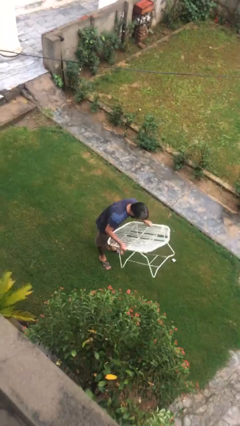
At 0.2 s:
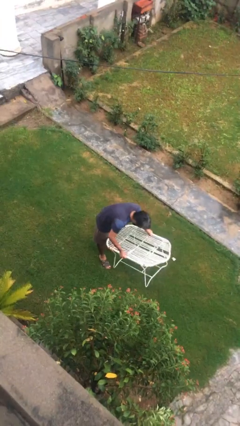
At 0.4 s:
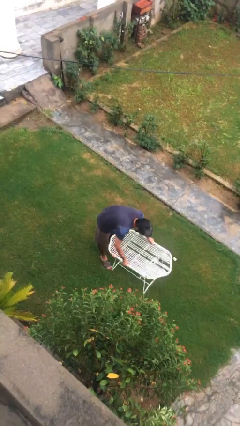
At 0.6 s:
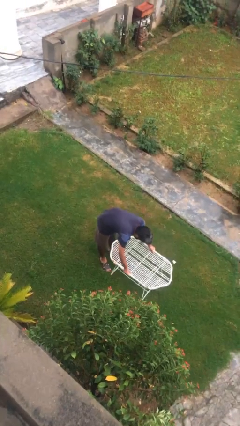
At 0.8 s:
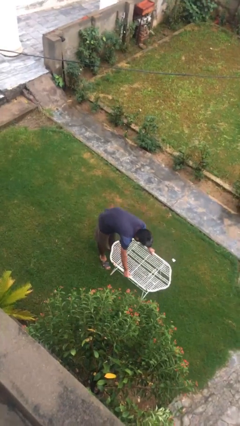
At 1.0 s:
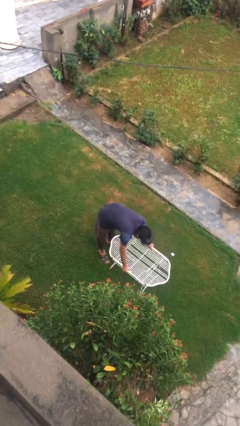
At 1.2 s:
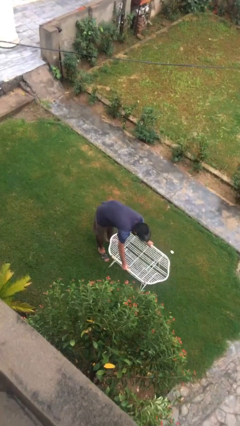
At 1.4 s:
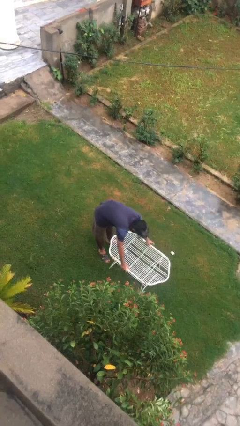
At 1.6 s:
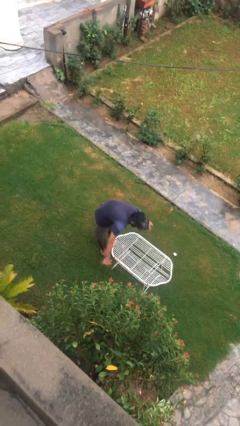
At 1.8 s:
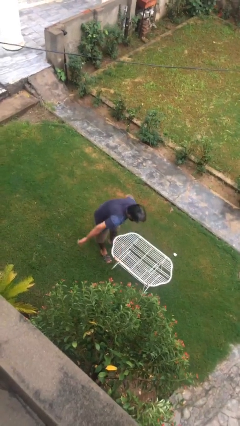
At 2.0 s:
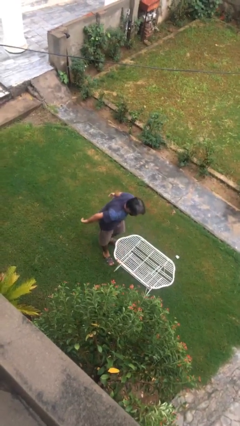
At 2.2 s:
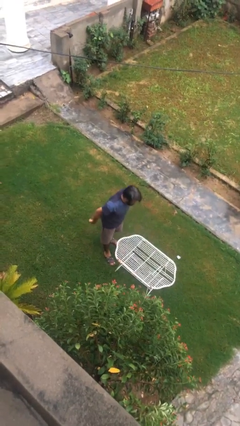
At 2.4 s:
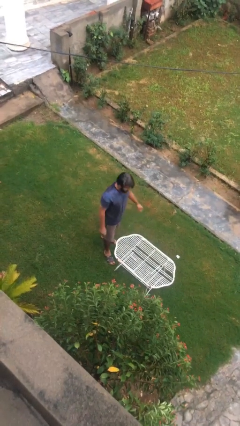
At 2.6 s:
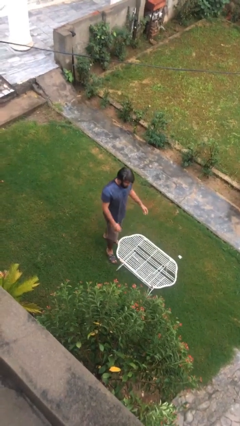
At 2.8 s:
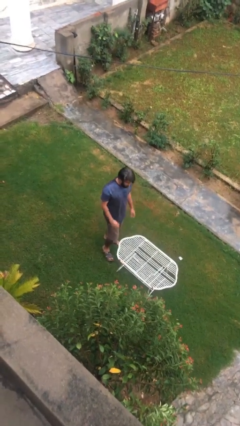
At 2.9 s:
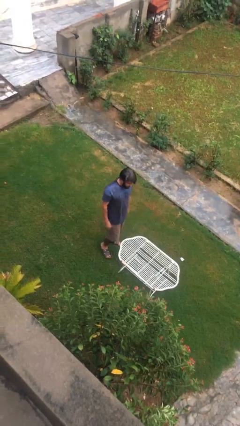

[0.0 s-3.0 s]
person puts down object on floor

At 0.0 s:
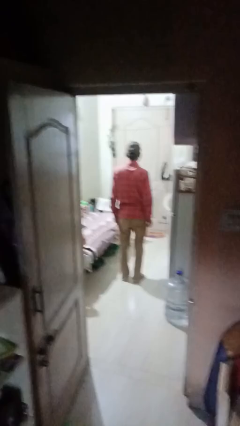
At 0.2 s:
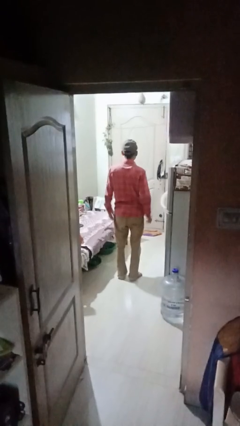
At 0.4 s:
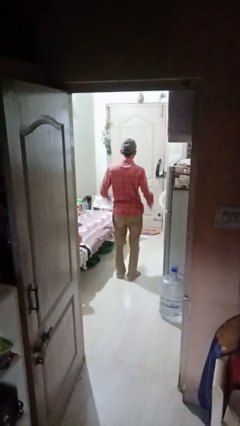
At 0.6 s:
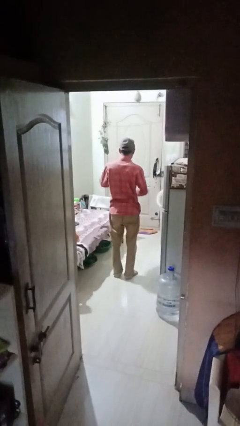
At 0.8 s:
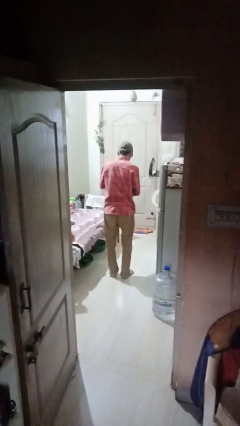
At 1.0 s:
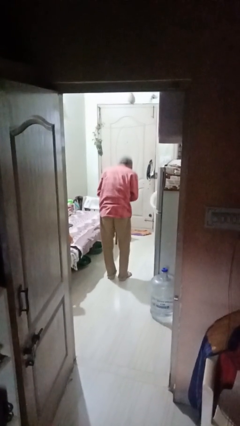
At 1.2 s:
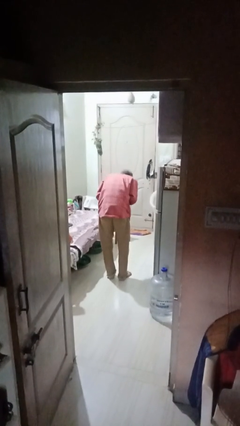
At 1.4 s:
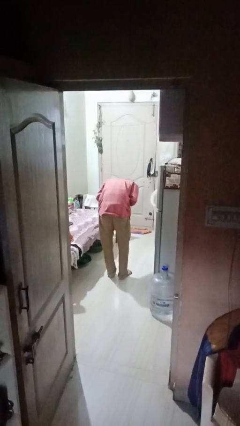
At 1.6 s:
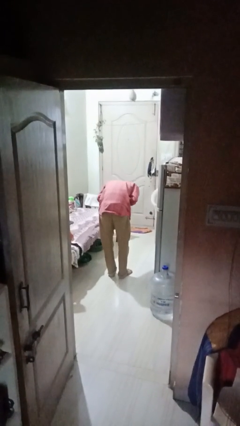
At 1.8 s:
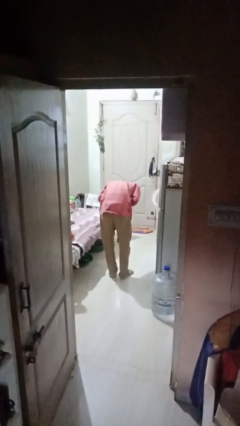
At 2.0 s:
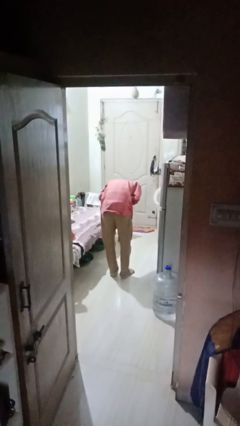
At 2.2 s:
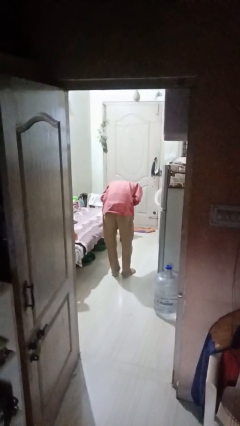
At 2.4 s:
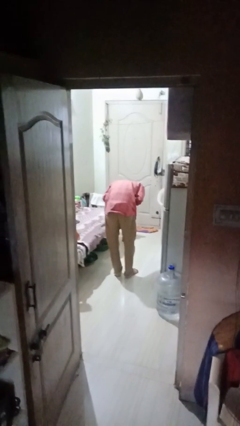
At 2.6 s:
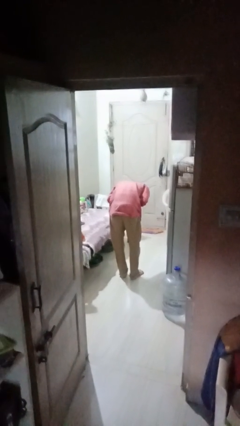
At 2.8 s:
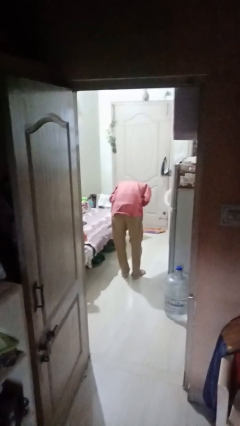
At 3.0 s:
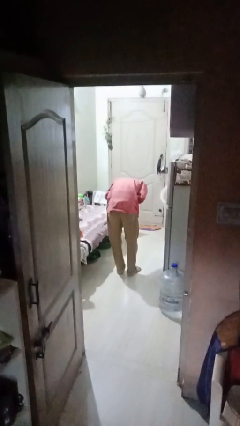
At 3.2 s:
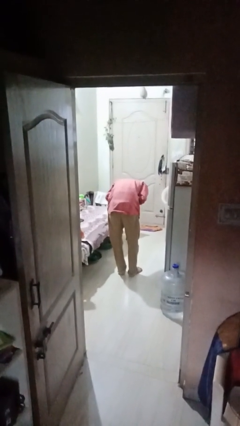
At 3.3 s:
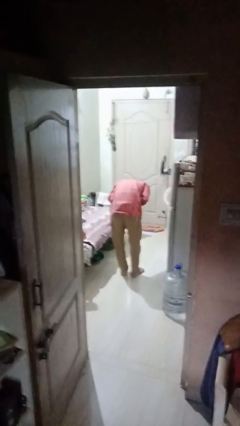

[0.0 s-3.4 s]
person bows

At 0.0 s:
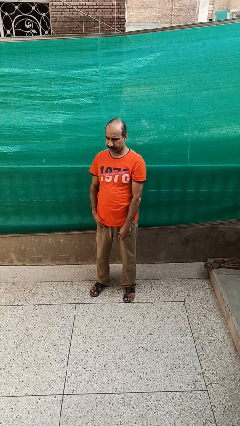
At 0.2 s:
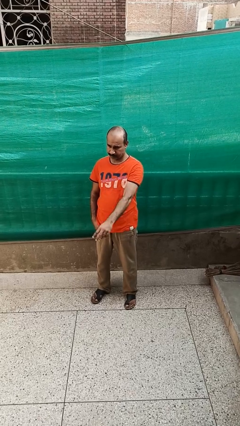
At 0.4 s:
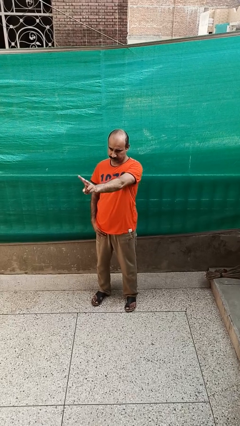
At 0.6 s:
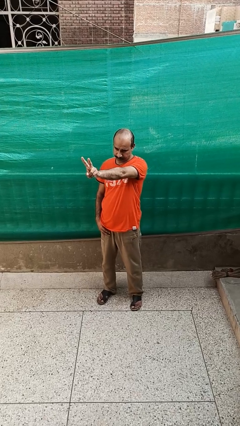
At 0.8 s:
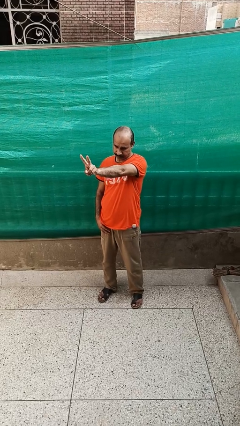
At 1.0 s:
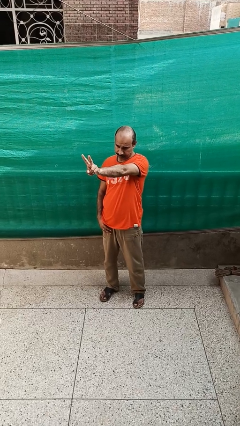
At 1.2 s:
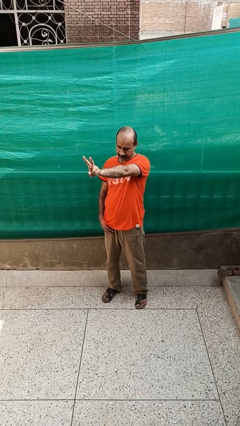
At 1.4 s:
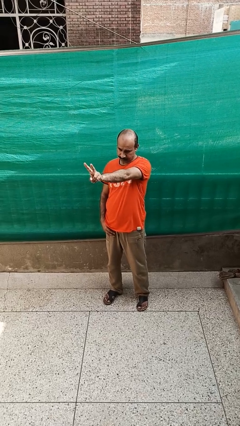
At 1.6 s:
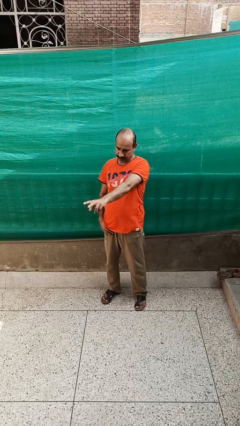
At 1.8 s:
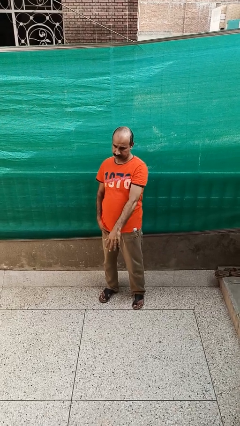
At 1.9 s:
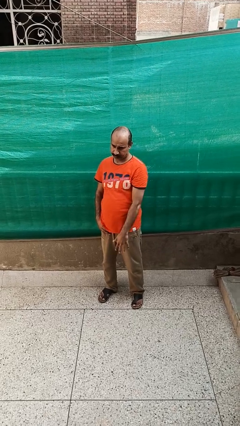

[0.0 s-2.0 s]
person gestures peace

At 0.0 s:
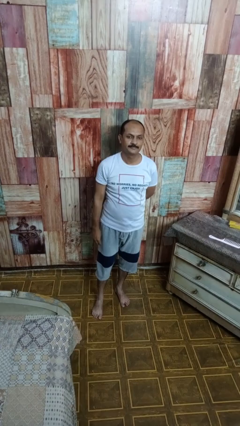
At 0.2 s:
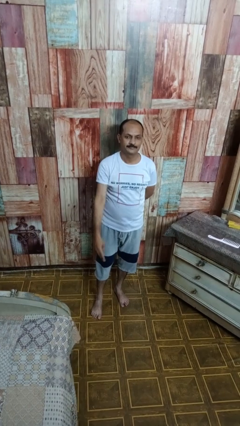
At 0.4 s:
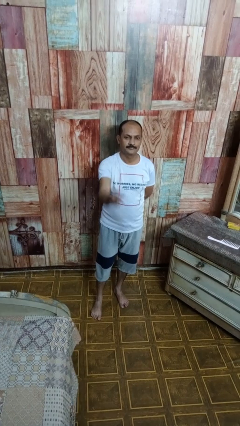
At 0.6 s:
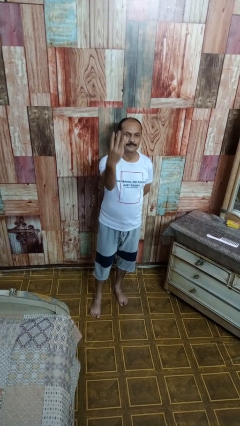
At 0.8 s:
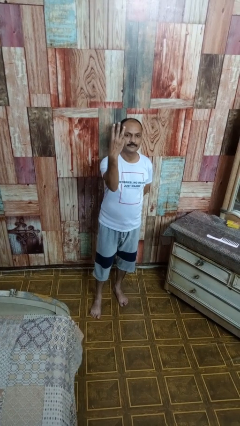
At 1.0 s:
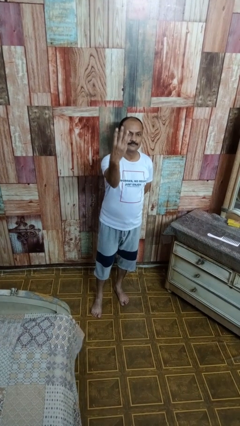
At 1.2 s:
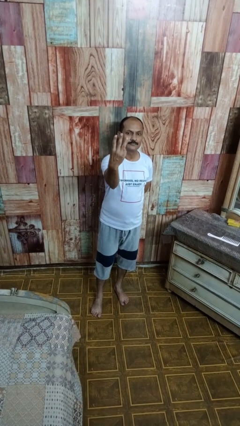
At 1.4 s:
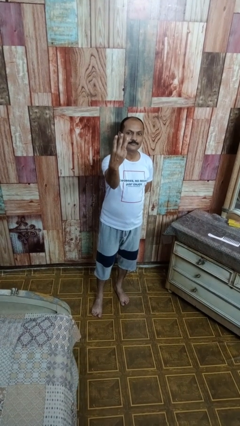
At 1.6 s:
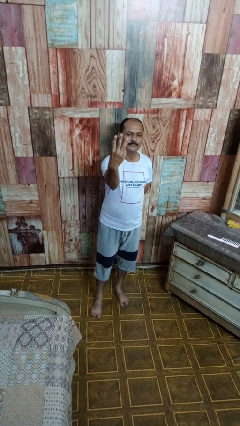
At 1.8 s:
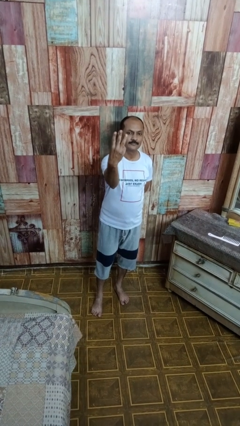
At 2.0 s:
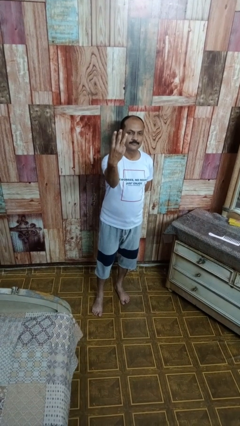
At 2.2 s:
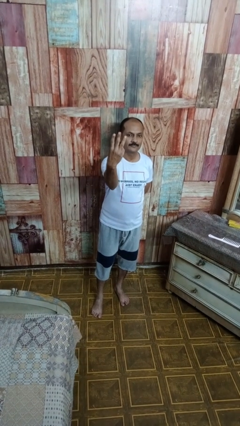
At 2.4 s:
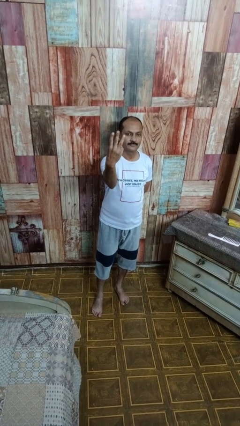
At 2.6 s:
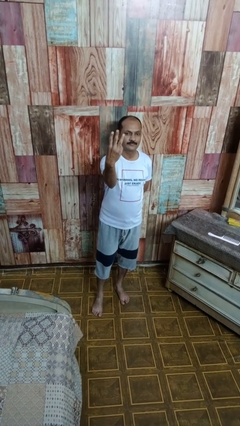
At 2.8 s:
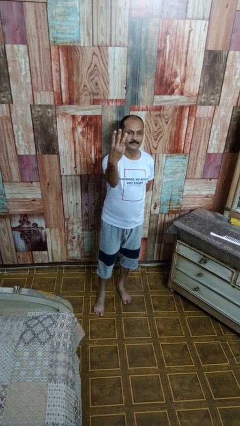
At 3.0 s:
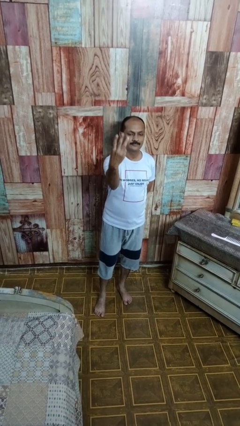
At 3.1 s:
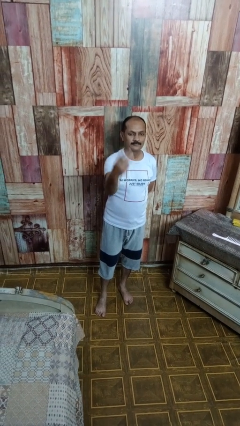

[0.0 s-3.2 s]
person gestures number three

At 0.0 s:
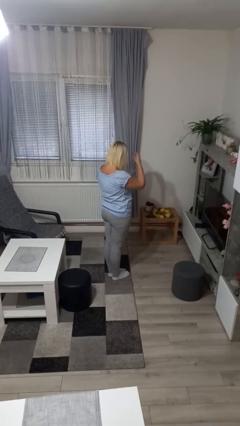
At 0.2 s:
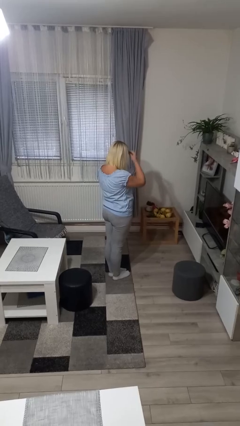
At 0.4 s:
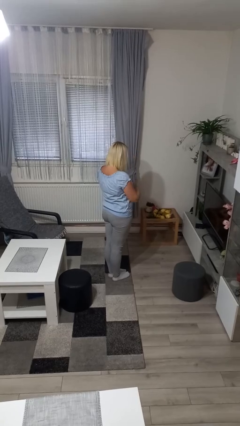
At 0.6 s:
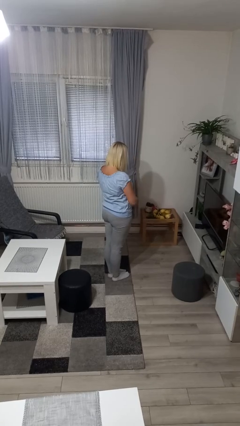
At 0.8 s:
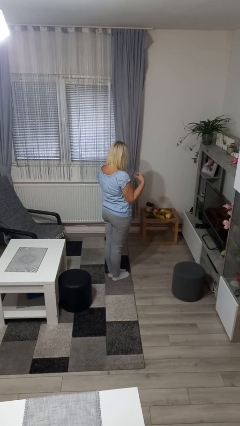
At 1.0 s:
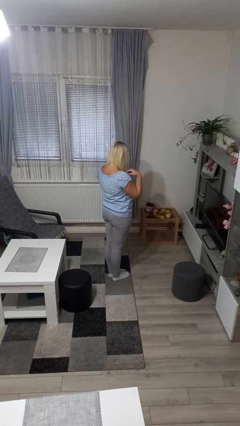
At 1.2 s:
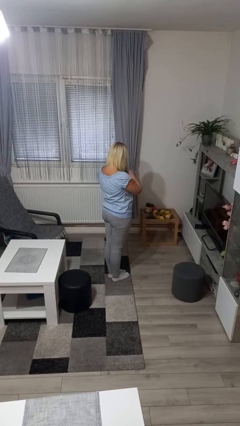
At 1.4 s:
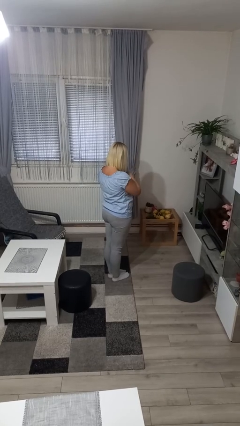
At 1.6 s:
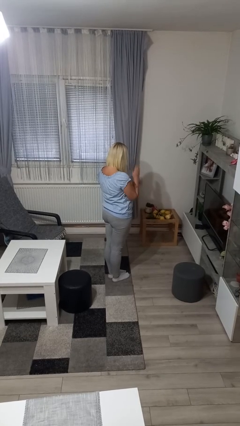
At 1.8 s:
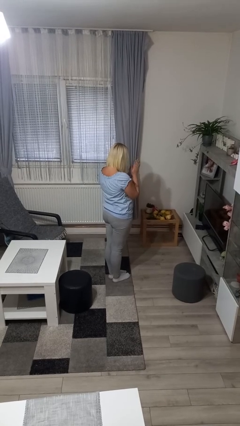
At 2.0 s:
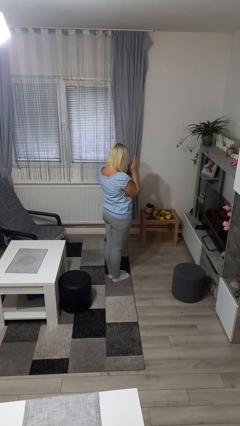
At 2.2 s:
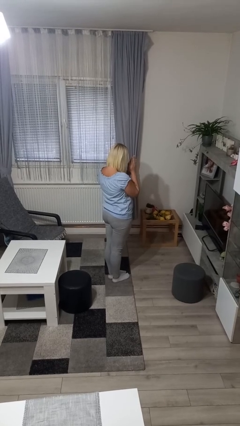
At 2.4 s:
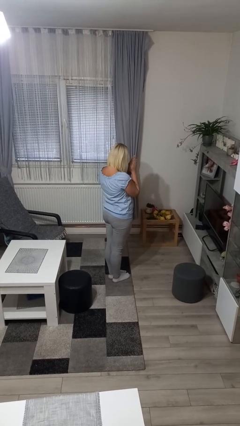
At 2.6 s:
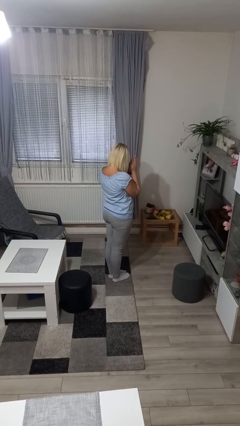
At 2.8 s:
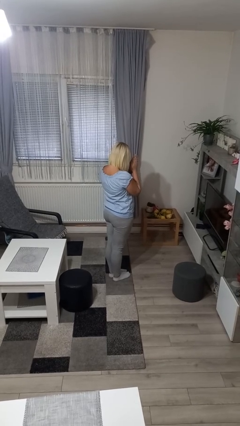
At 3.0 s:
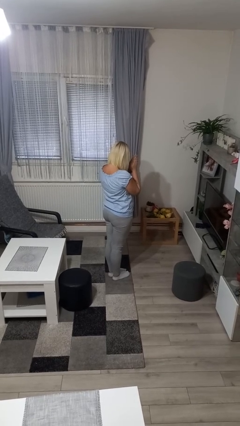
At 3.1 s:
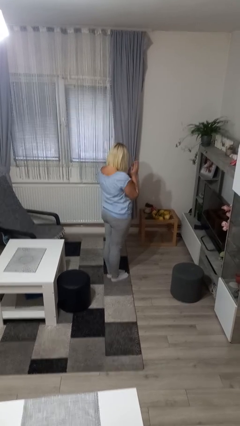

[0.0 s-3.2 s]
person prays

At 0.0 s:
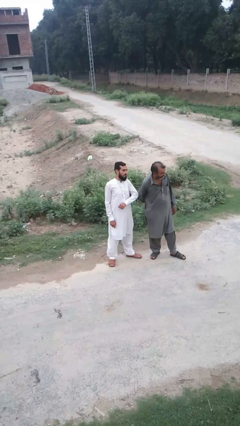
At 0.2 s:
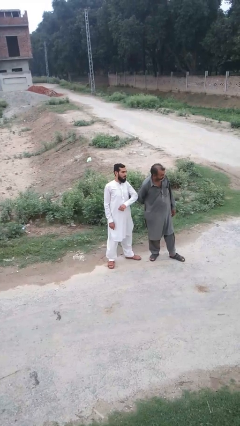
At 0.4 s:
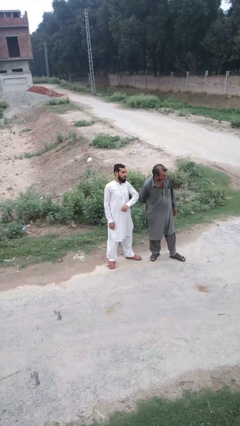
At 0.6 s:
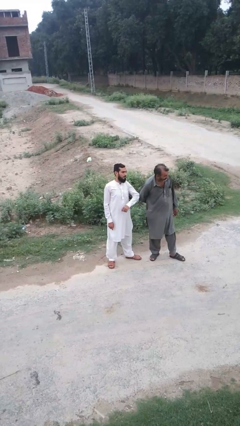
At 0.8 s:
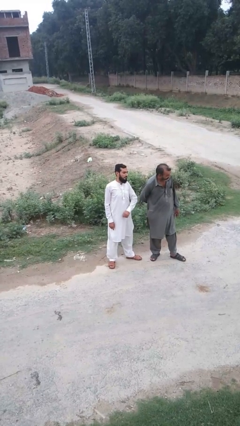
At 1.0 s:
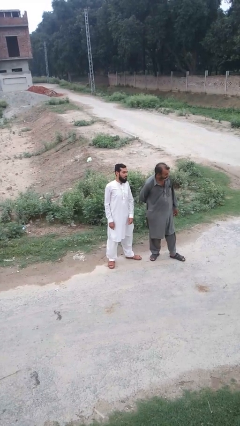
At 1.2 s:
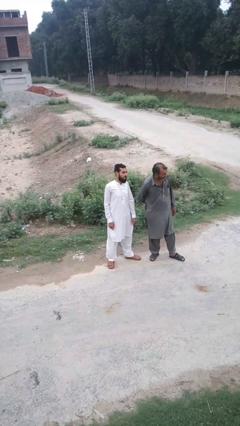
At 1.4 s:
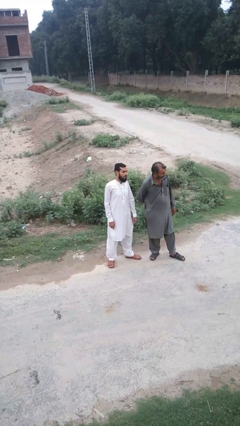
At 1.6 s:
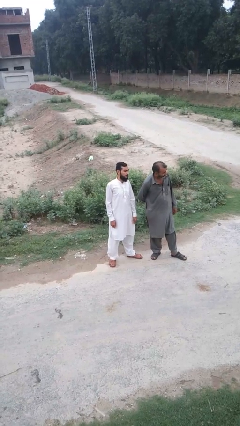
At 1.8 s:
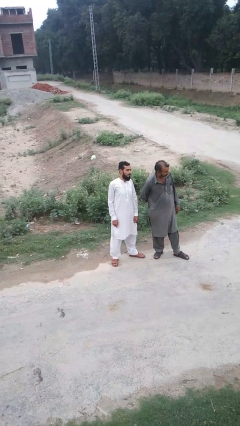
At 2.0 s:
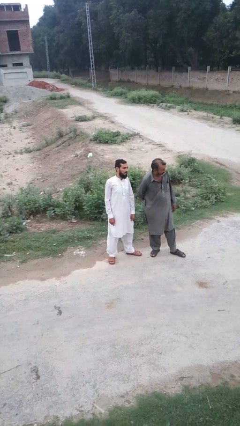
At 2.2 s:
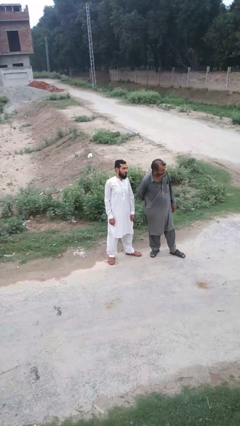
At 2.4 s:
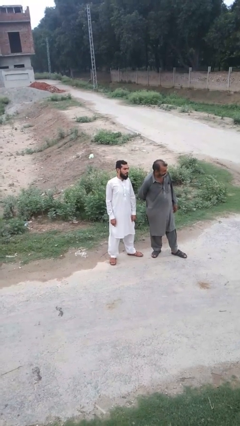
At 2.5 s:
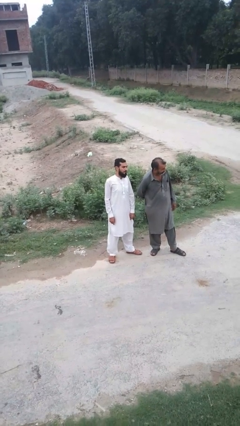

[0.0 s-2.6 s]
person nudges person with elbow
